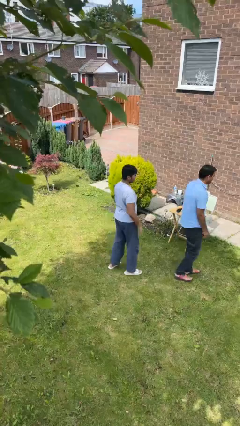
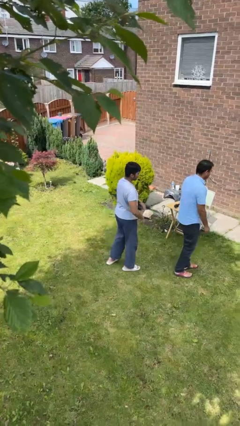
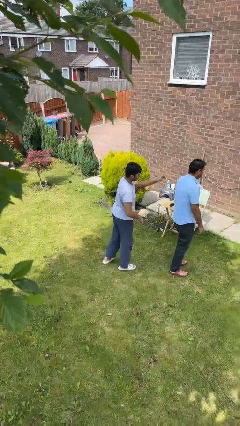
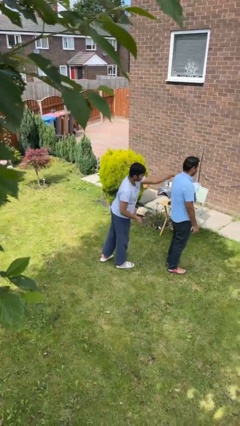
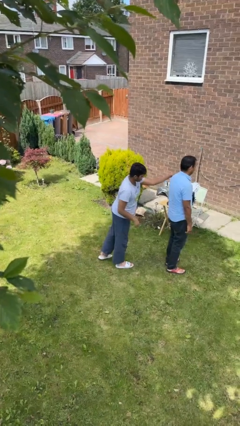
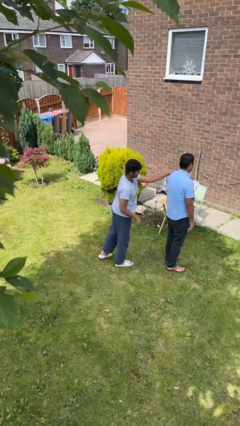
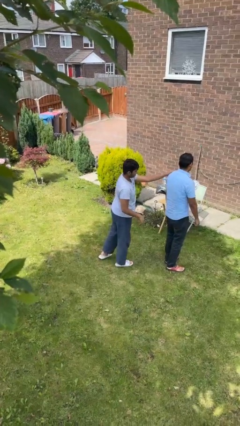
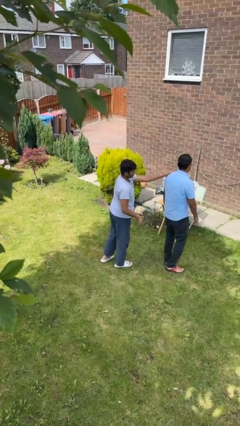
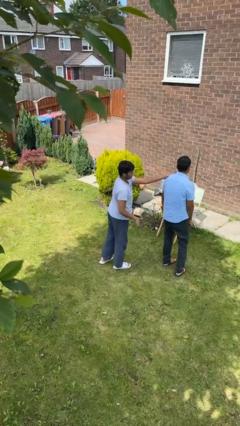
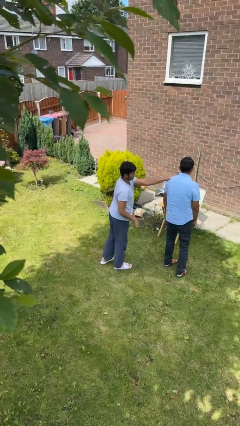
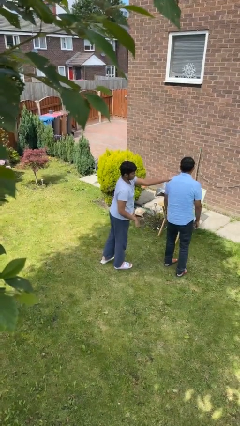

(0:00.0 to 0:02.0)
person grabs person by shoulder

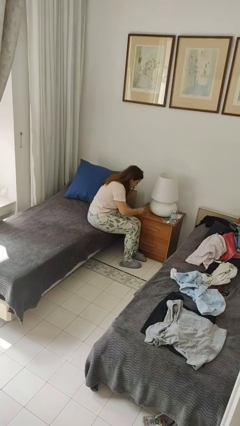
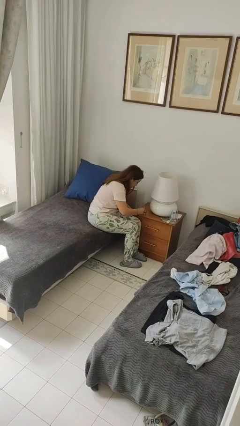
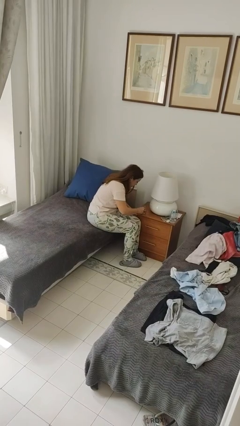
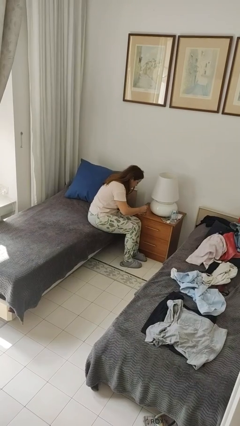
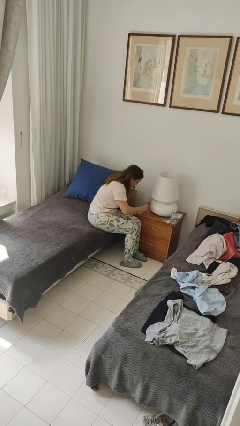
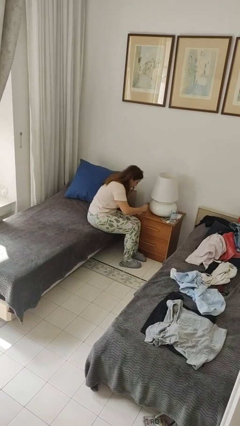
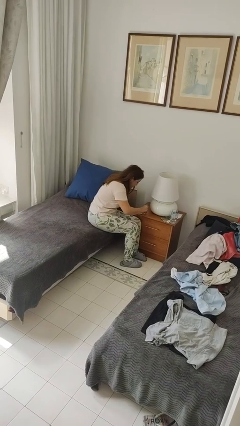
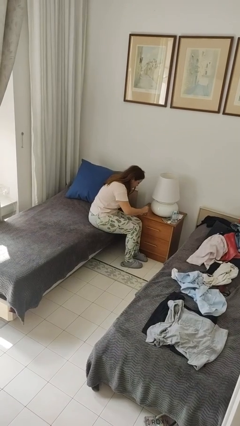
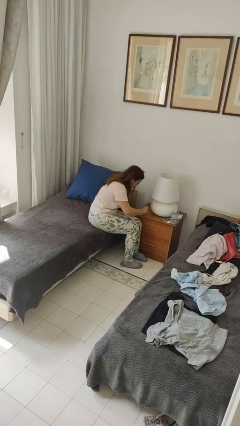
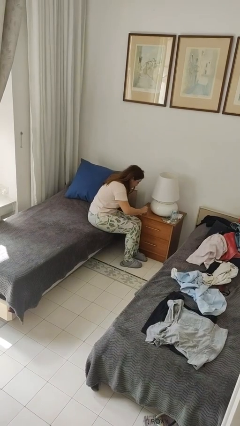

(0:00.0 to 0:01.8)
person paints fingernails

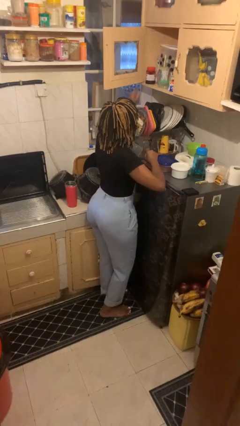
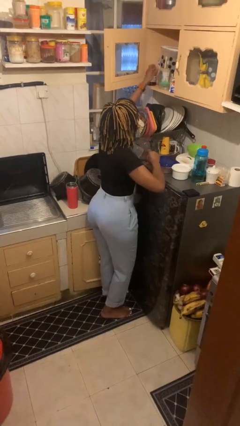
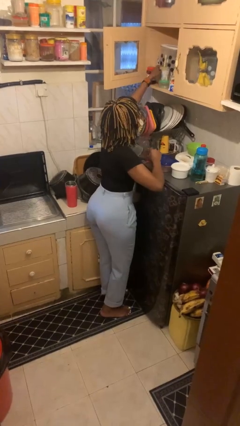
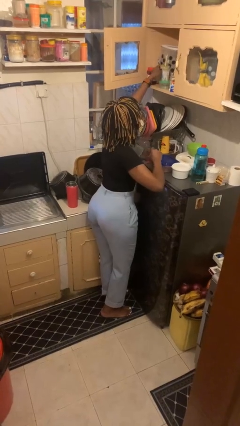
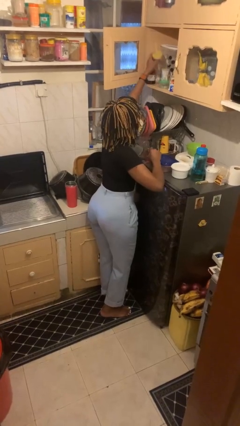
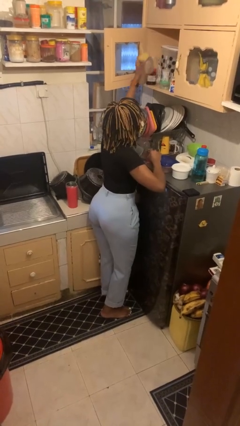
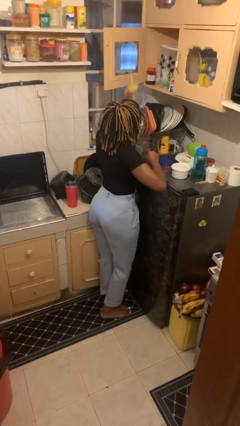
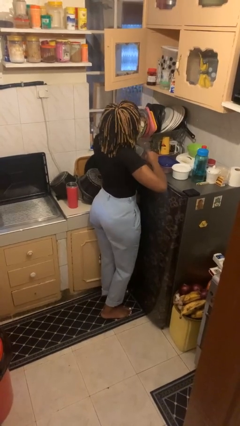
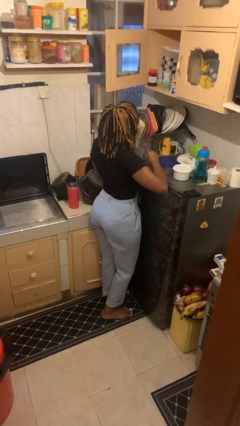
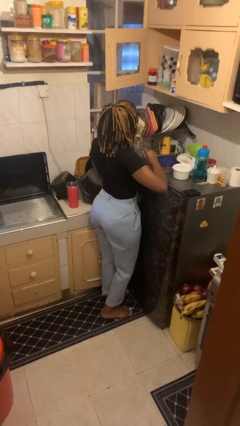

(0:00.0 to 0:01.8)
person takes object from cabinet

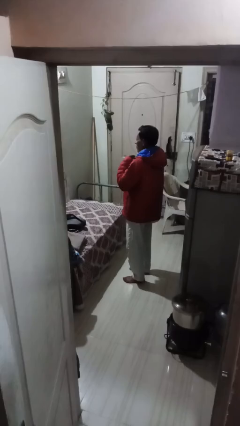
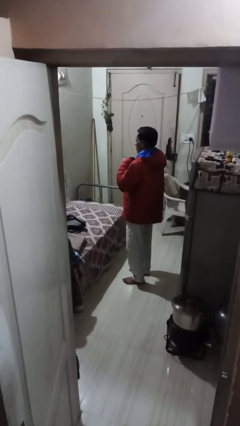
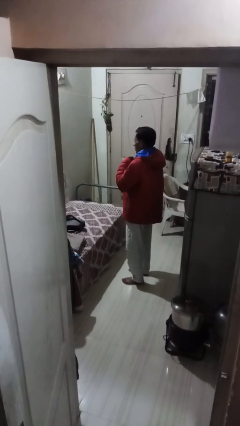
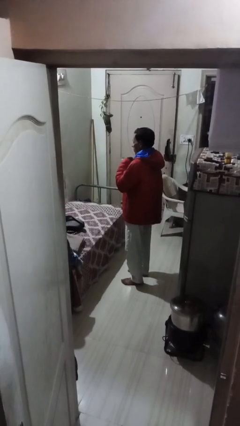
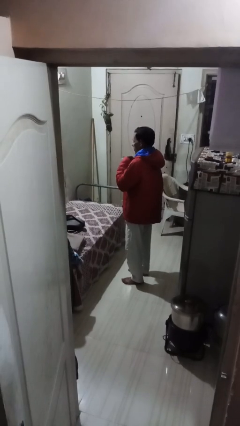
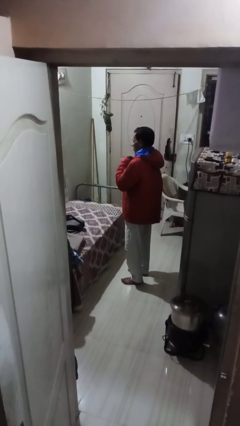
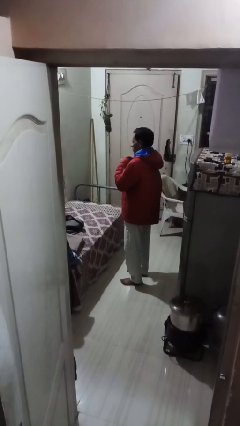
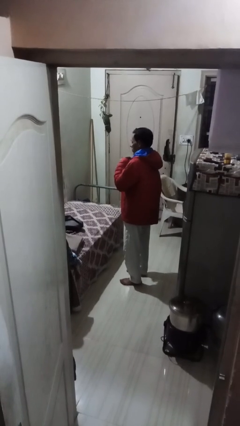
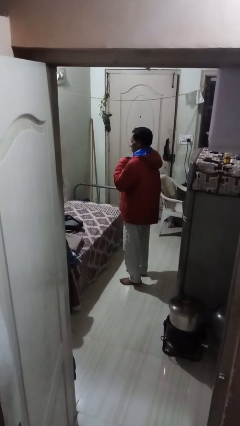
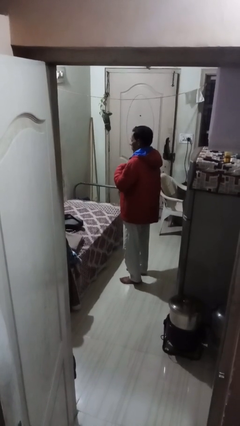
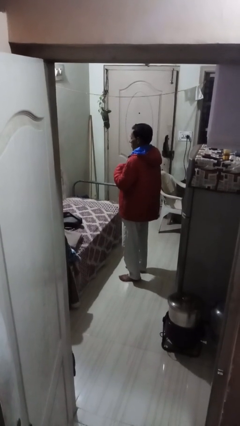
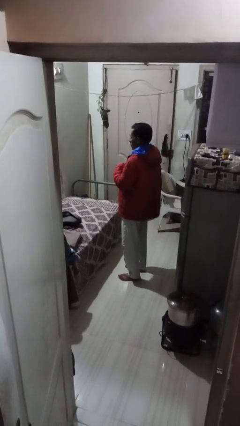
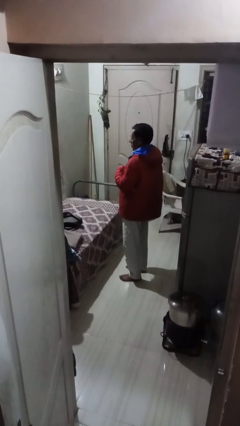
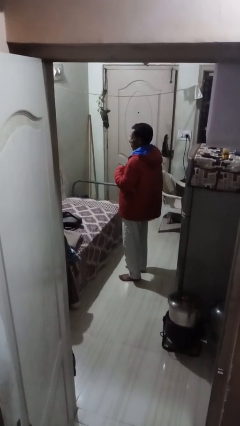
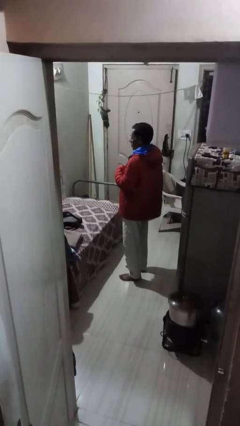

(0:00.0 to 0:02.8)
person unzips jacket

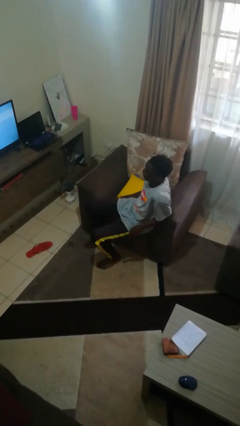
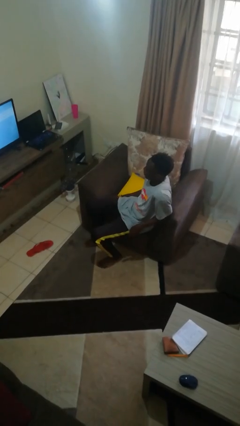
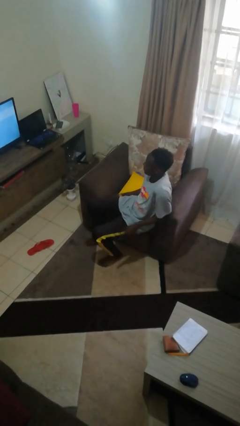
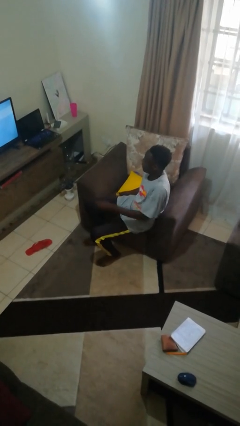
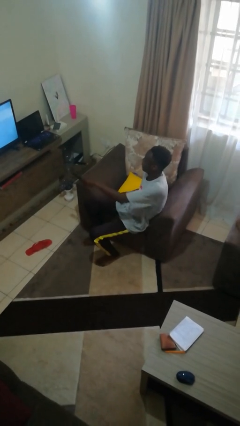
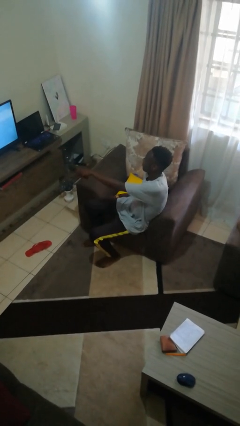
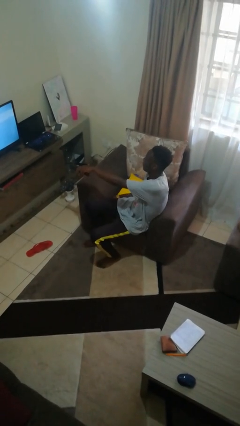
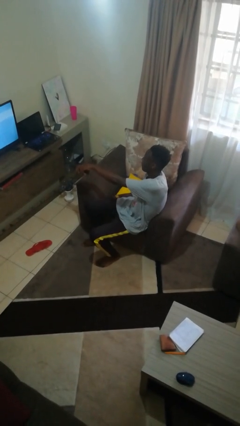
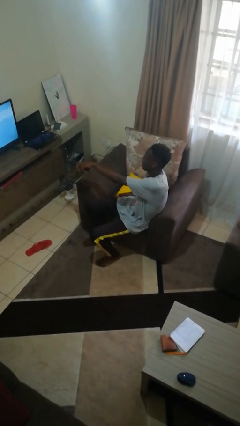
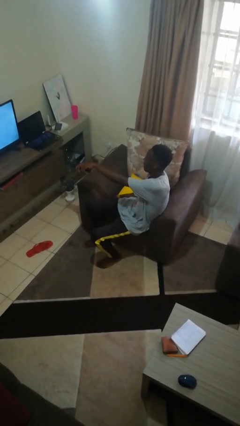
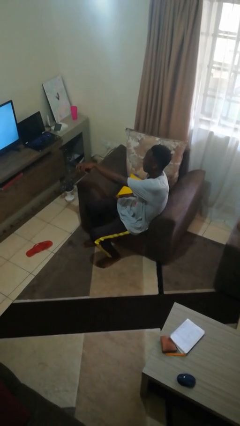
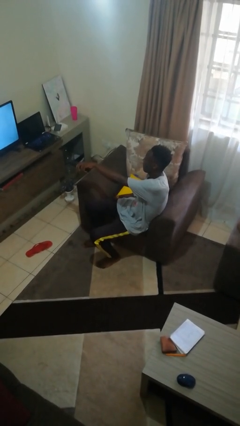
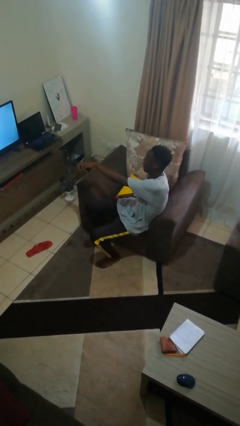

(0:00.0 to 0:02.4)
person uses television remote

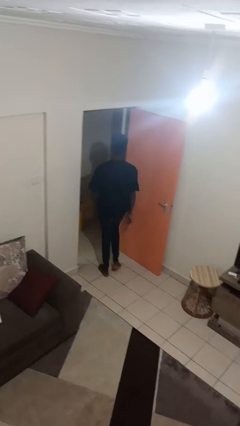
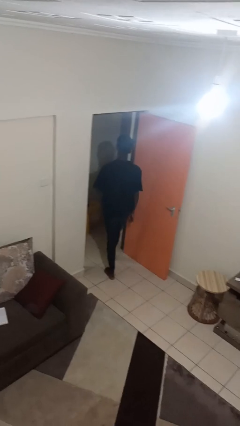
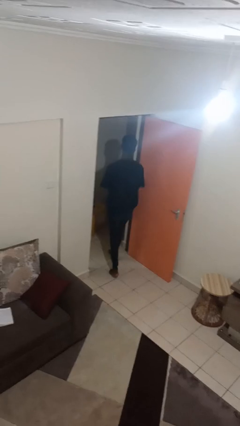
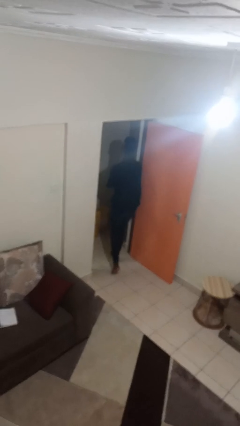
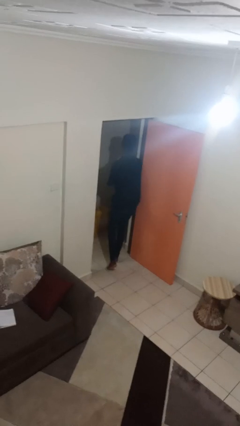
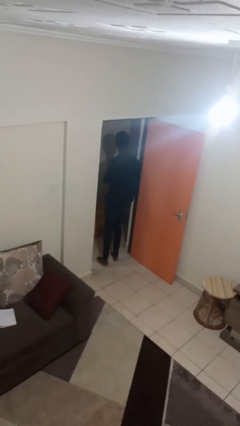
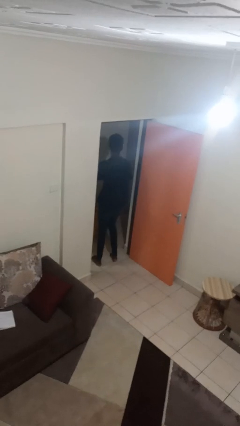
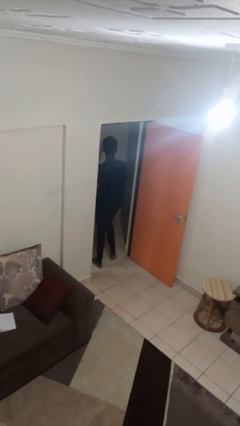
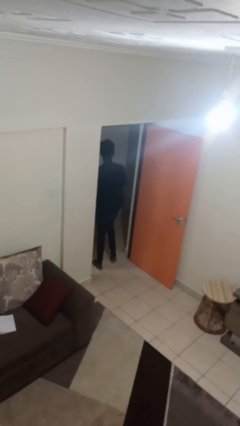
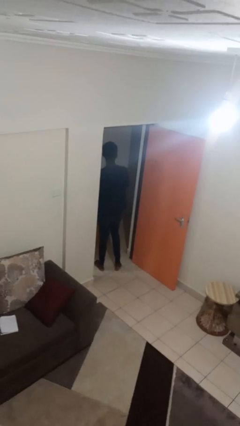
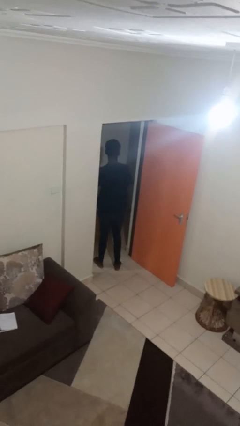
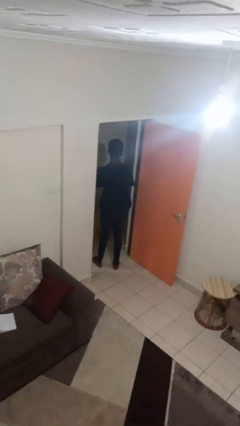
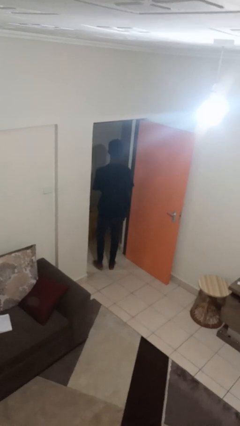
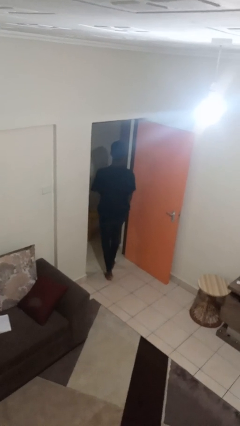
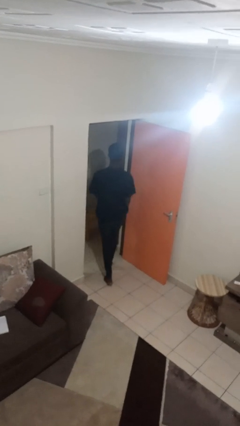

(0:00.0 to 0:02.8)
person bumps into wall

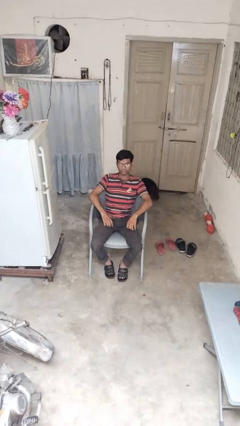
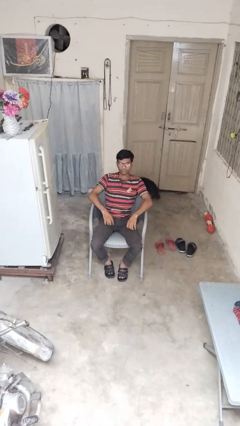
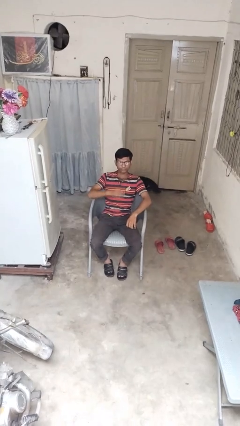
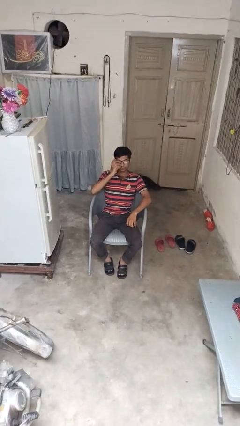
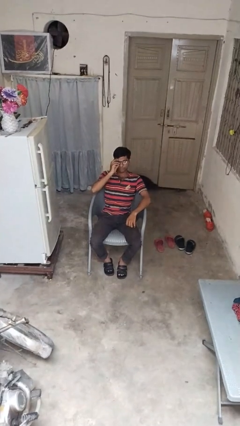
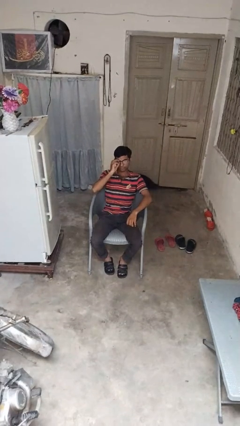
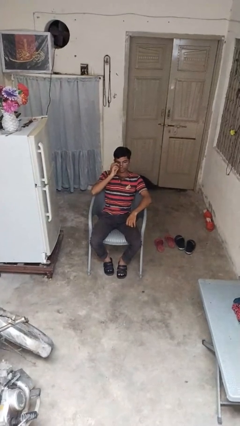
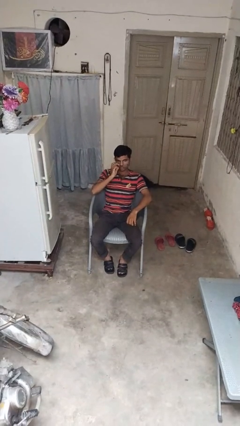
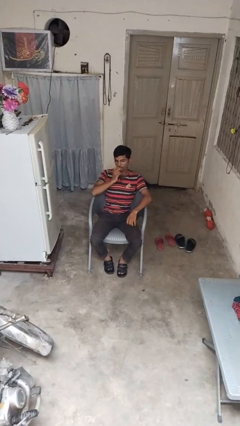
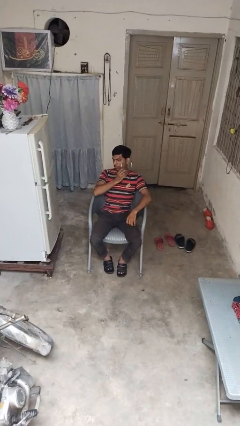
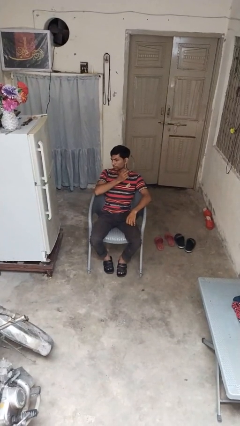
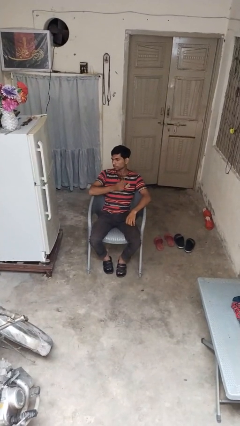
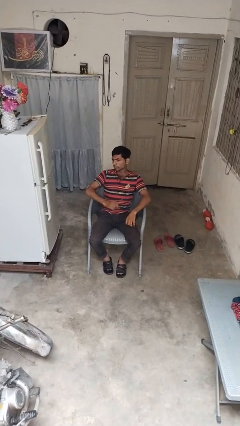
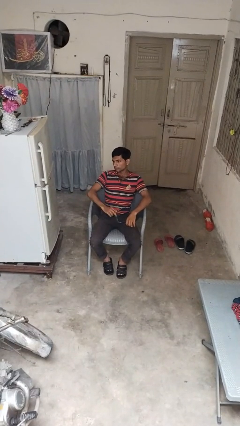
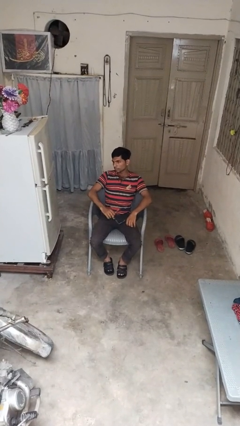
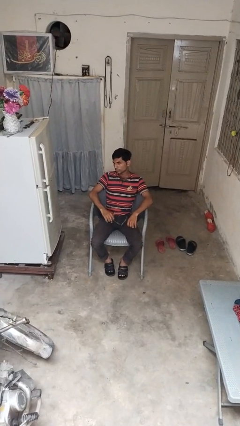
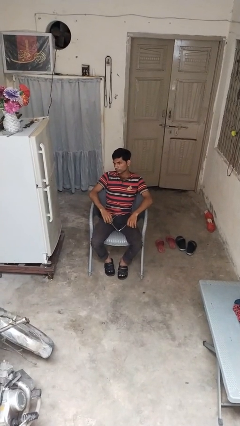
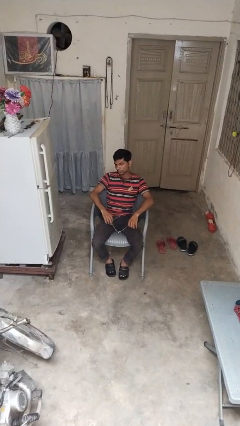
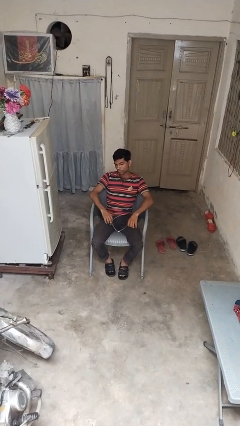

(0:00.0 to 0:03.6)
person takes off glasses
